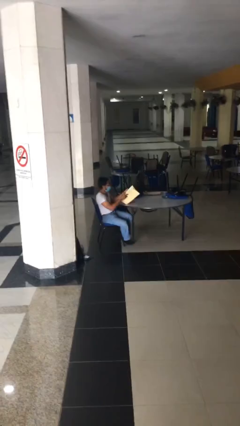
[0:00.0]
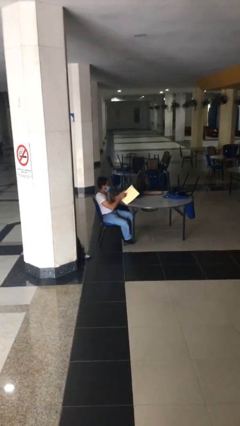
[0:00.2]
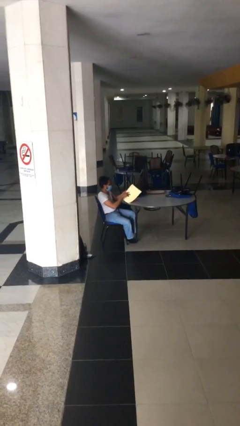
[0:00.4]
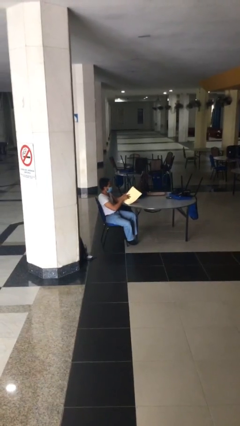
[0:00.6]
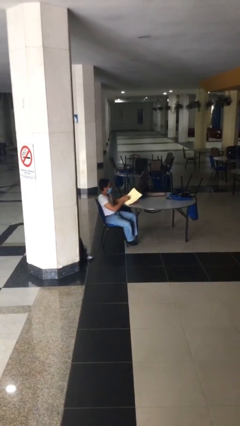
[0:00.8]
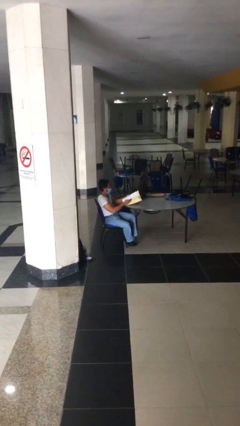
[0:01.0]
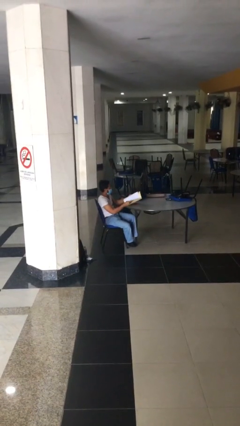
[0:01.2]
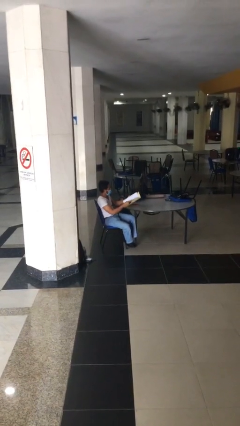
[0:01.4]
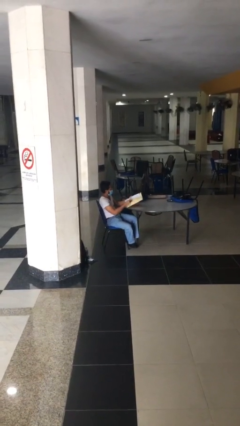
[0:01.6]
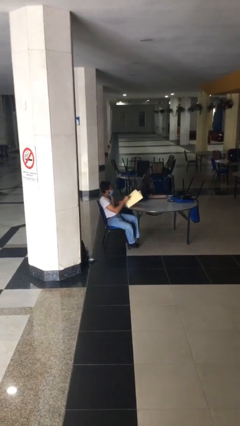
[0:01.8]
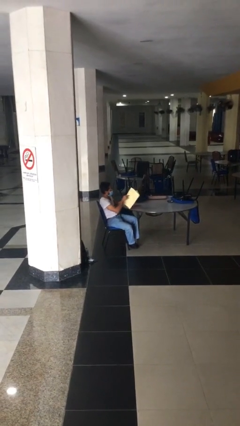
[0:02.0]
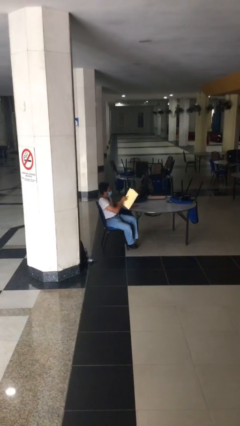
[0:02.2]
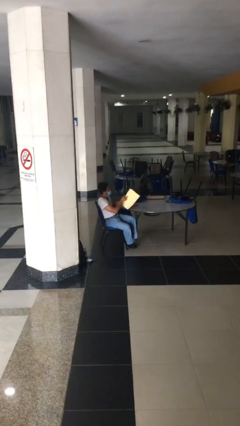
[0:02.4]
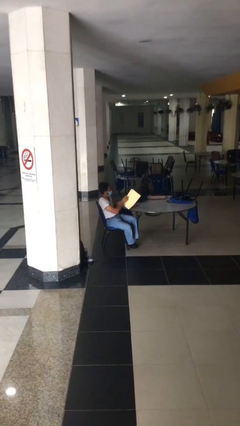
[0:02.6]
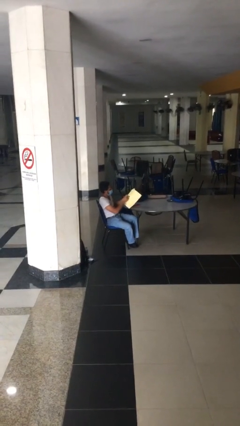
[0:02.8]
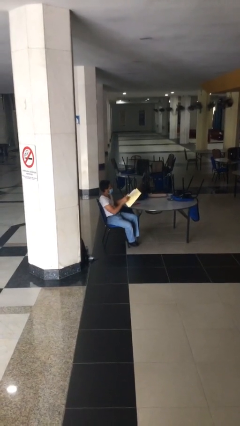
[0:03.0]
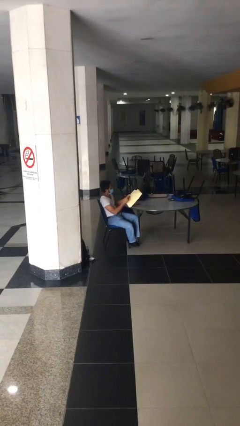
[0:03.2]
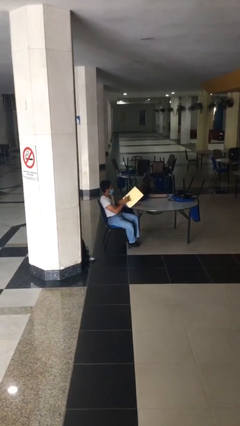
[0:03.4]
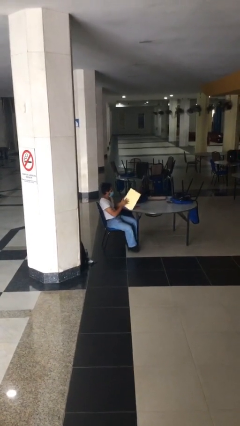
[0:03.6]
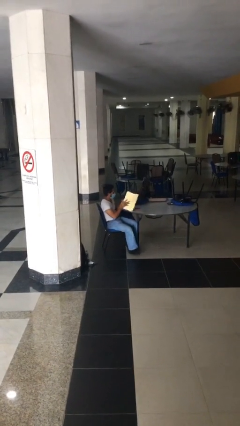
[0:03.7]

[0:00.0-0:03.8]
person reads document

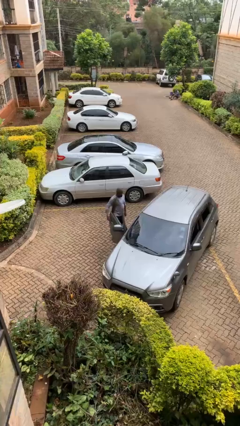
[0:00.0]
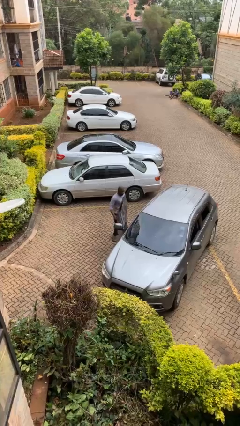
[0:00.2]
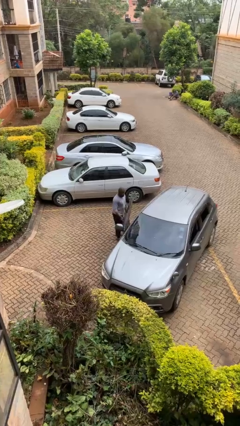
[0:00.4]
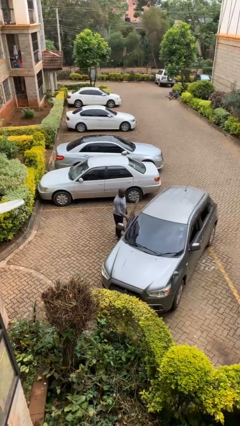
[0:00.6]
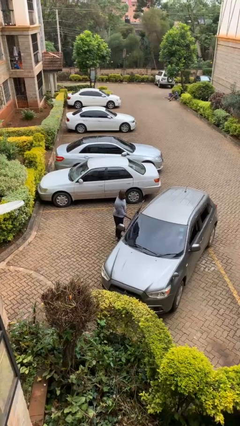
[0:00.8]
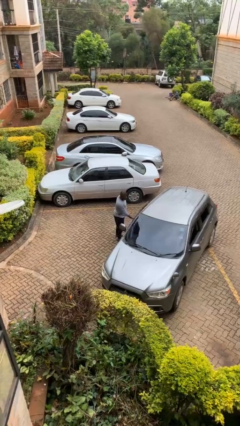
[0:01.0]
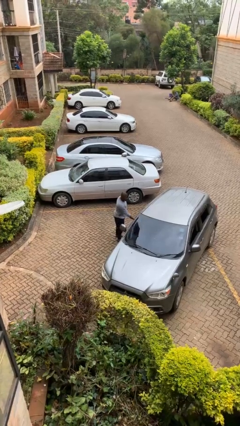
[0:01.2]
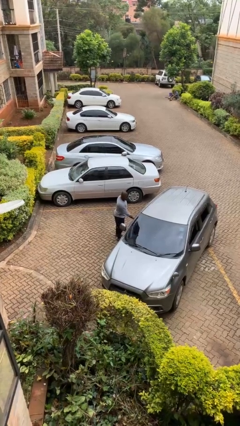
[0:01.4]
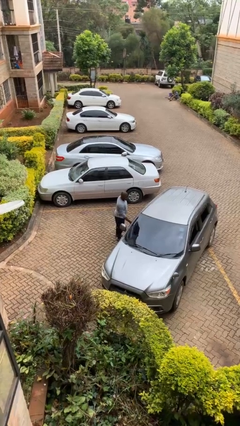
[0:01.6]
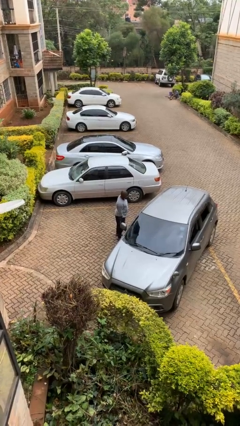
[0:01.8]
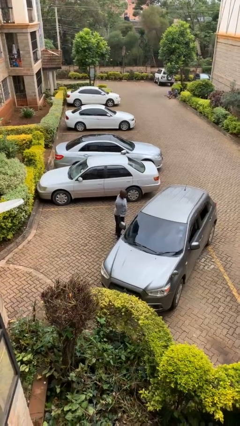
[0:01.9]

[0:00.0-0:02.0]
person closes car door

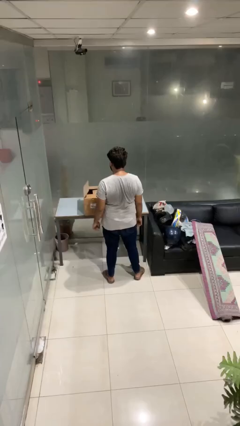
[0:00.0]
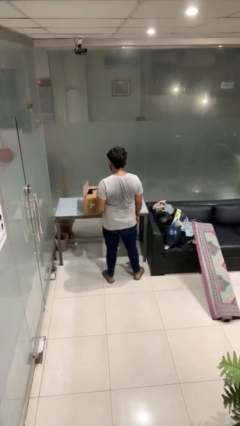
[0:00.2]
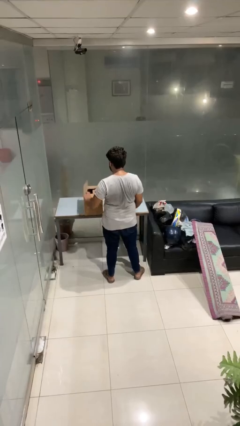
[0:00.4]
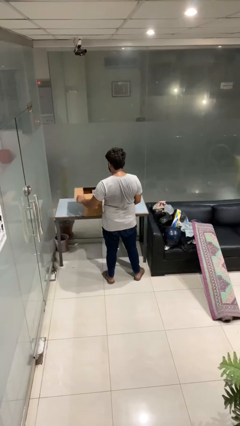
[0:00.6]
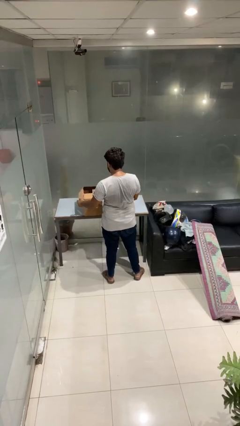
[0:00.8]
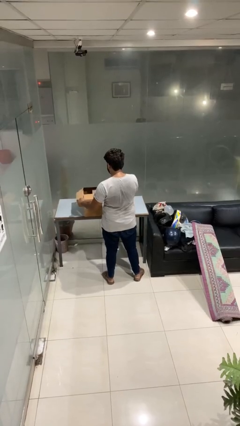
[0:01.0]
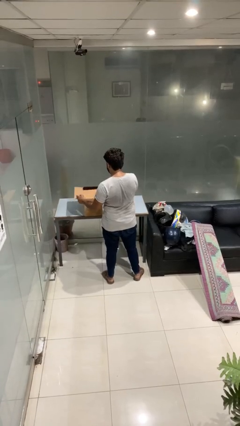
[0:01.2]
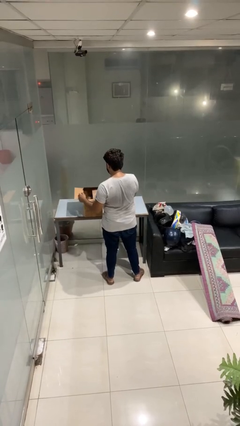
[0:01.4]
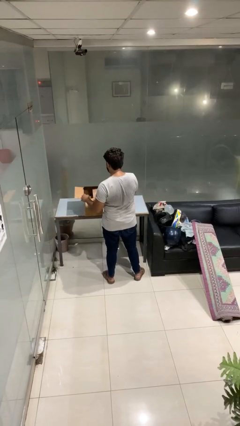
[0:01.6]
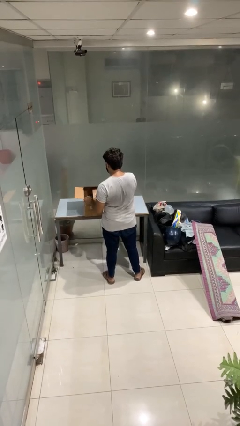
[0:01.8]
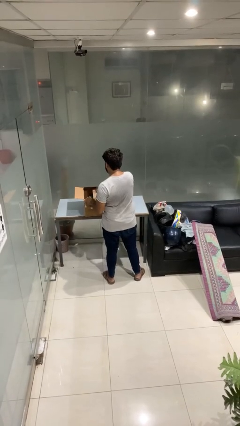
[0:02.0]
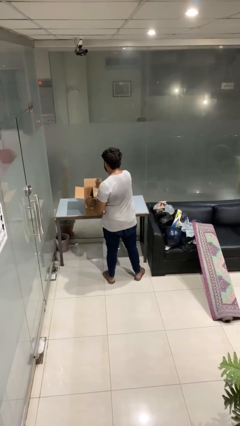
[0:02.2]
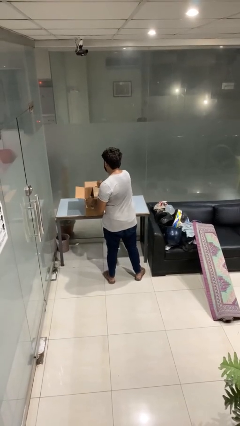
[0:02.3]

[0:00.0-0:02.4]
person opens box

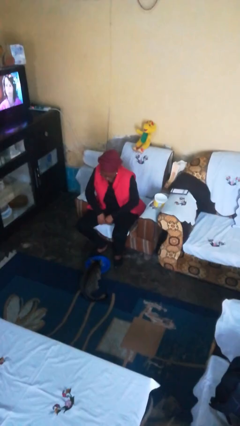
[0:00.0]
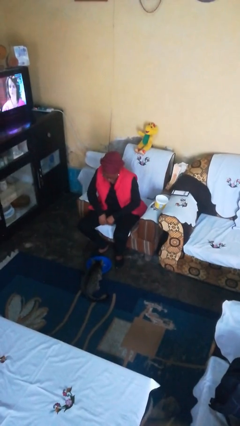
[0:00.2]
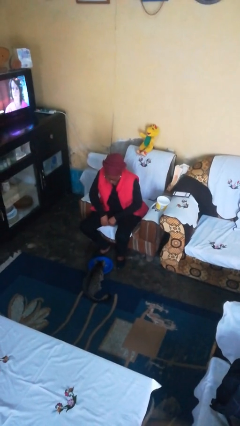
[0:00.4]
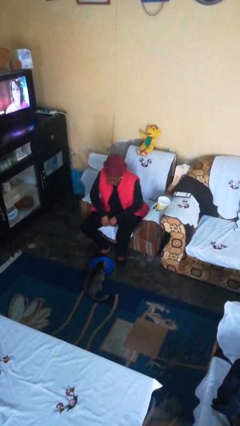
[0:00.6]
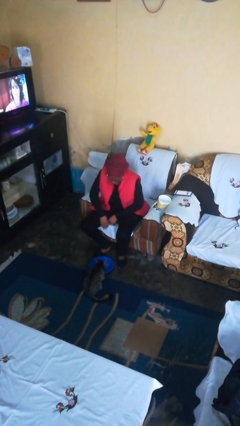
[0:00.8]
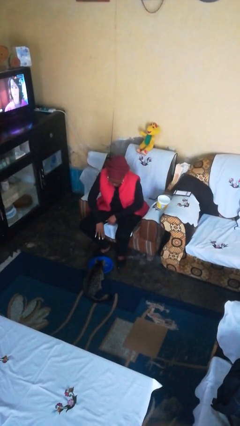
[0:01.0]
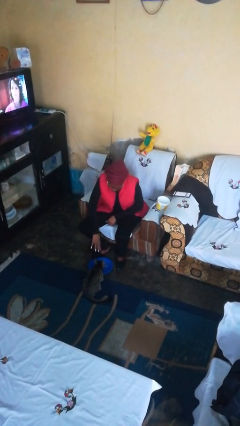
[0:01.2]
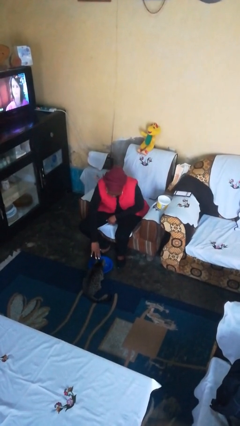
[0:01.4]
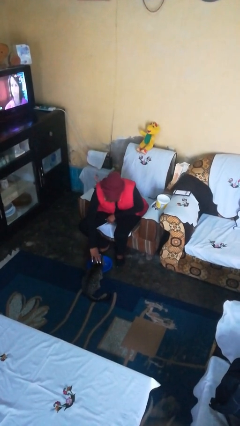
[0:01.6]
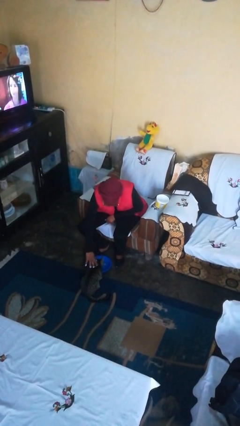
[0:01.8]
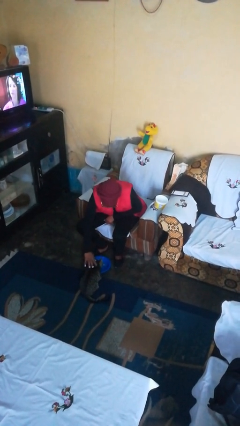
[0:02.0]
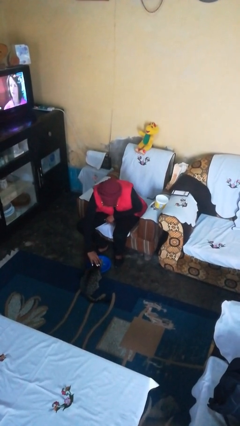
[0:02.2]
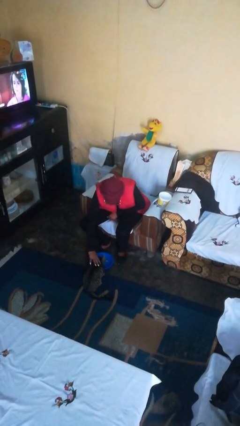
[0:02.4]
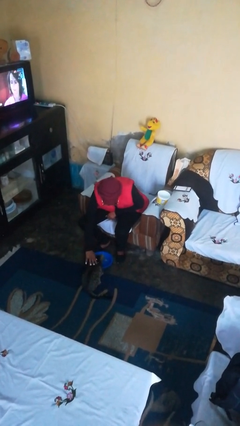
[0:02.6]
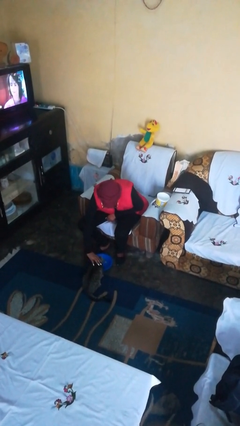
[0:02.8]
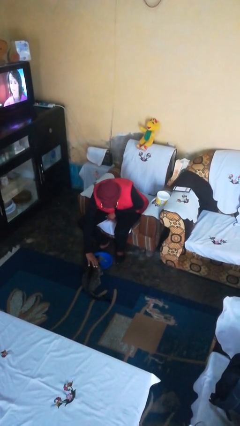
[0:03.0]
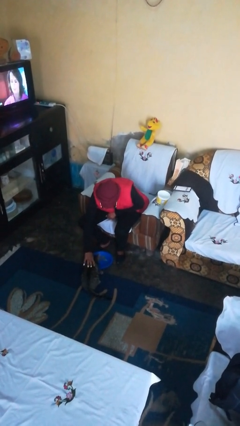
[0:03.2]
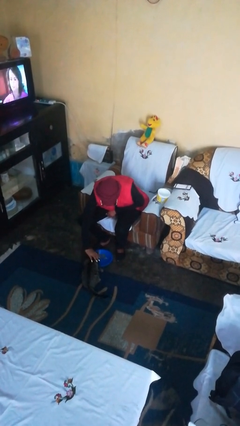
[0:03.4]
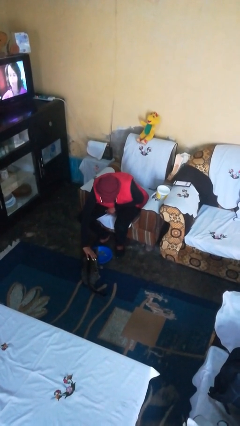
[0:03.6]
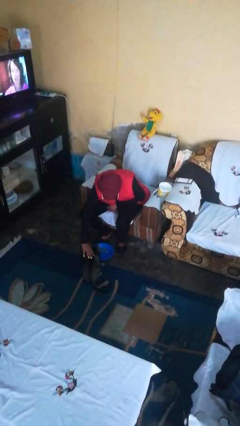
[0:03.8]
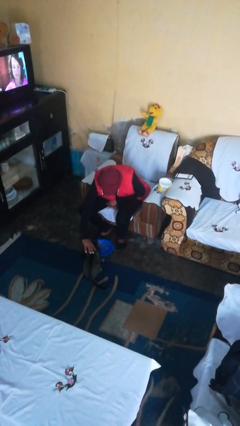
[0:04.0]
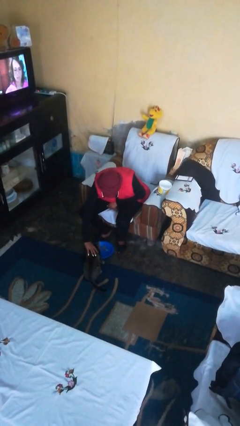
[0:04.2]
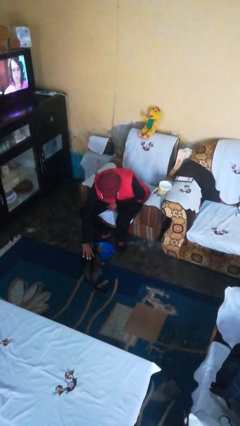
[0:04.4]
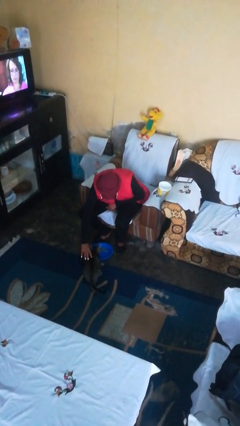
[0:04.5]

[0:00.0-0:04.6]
person pets cat

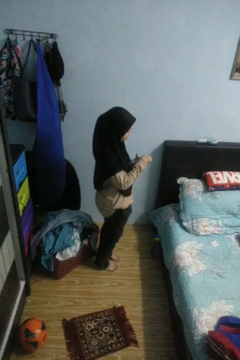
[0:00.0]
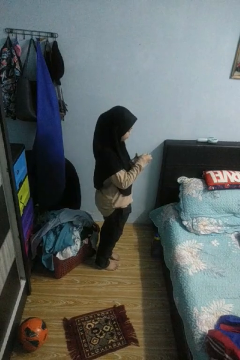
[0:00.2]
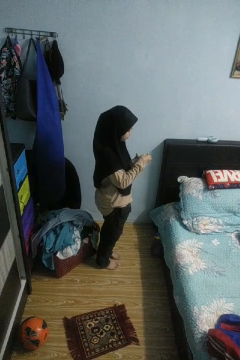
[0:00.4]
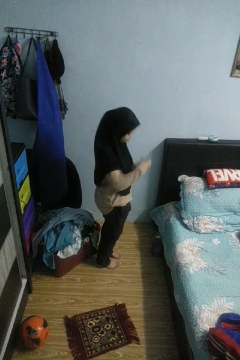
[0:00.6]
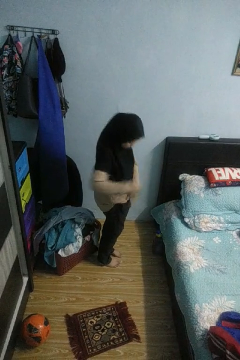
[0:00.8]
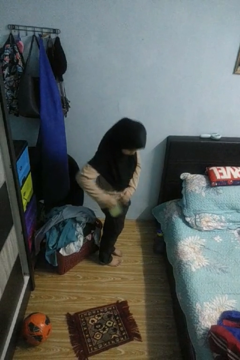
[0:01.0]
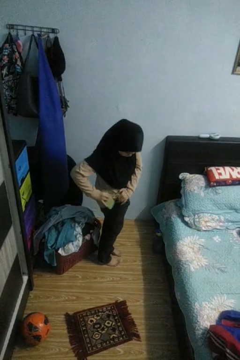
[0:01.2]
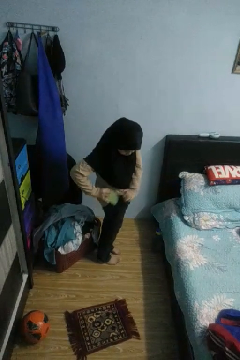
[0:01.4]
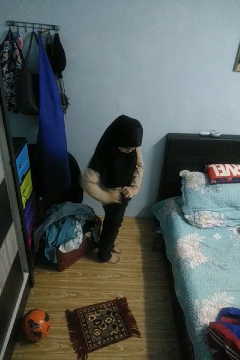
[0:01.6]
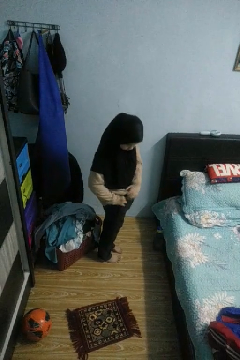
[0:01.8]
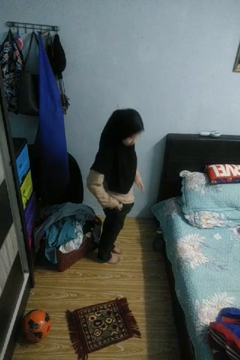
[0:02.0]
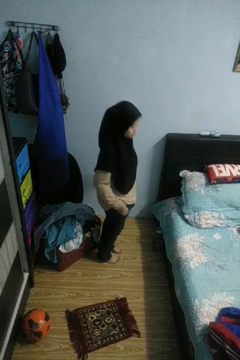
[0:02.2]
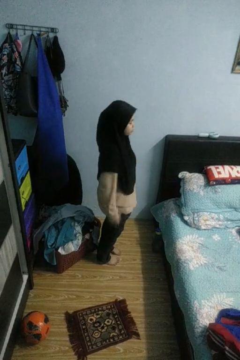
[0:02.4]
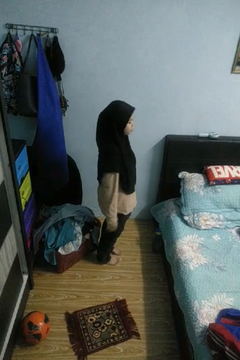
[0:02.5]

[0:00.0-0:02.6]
person puts phone into pocket

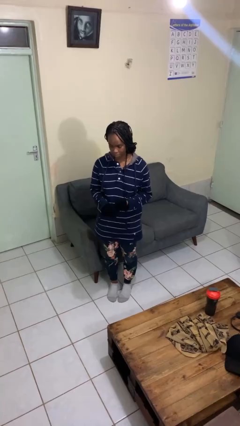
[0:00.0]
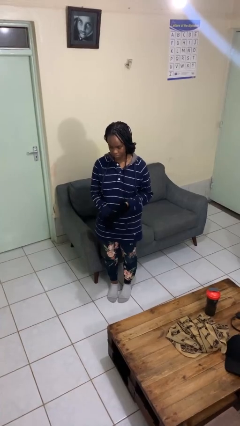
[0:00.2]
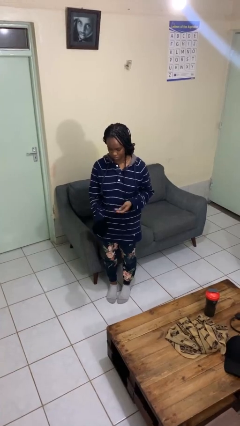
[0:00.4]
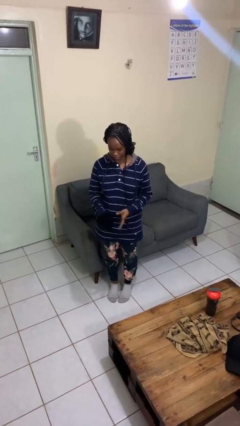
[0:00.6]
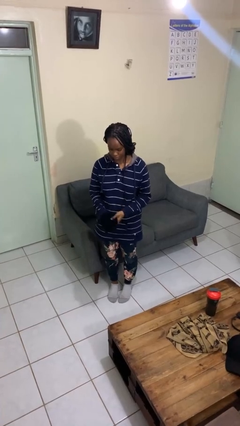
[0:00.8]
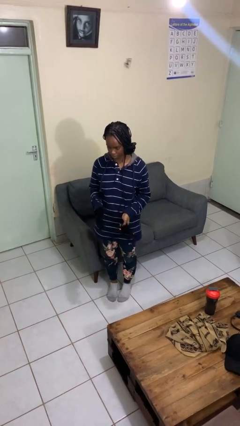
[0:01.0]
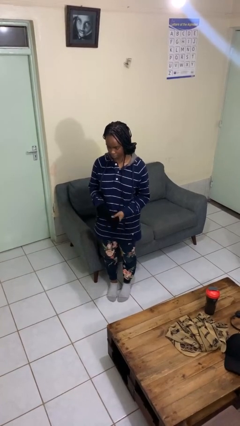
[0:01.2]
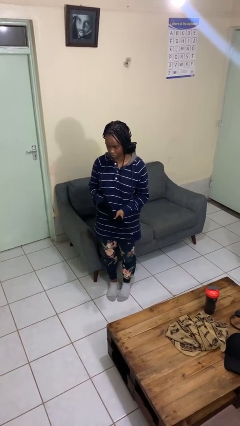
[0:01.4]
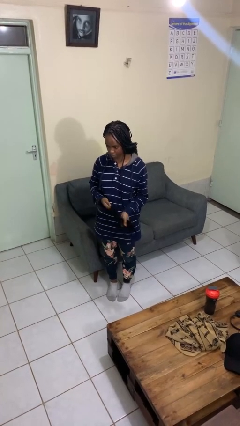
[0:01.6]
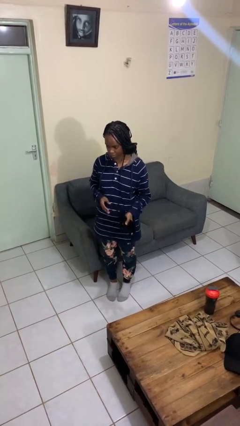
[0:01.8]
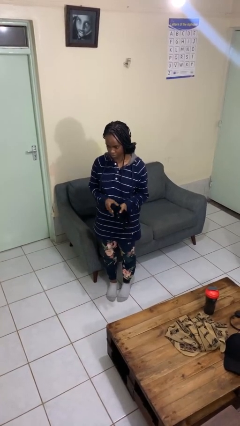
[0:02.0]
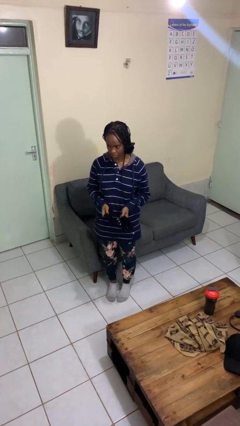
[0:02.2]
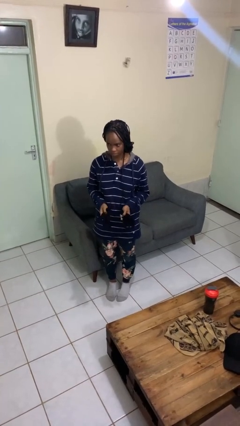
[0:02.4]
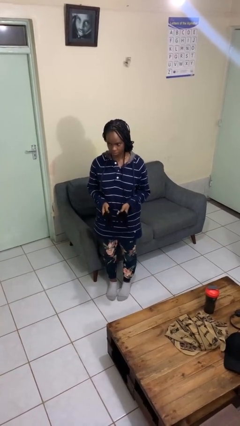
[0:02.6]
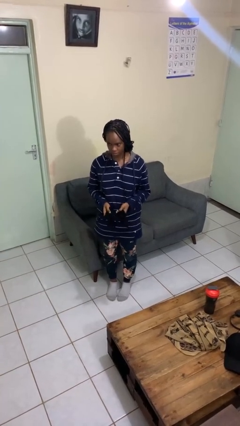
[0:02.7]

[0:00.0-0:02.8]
person takes off gloves
